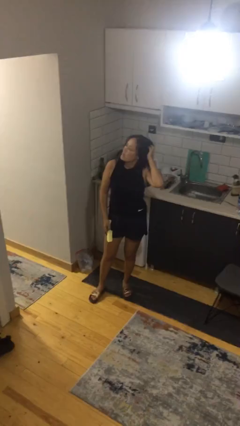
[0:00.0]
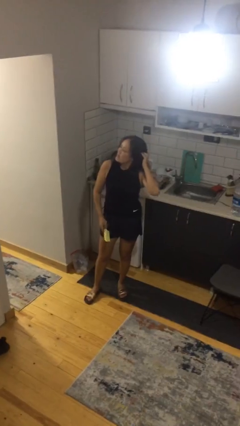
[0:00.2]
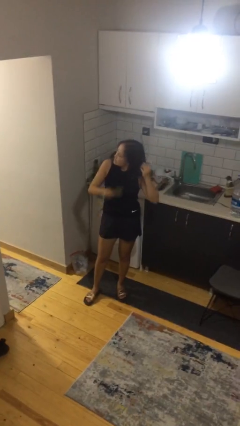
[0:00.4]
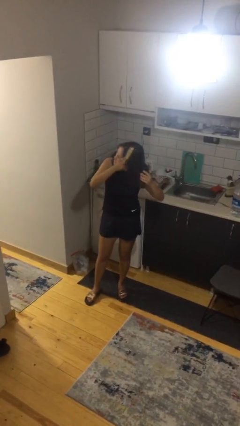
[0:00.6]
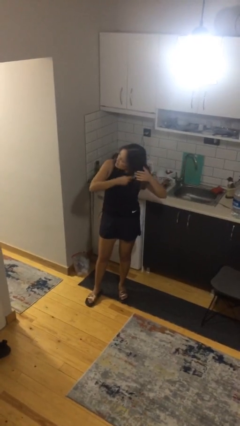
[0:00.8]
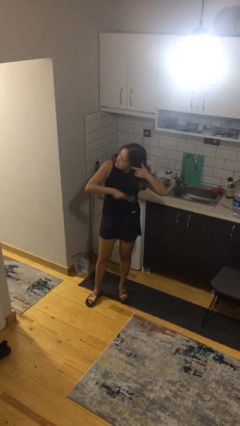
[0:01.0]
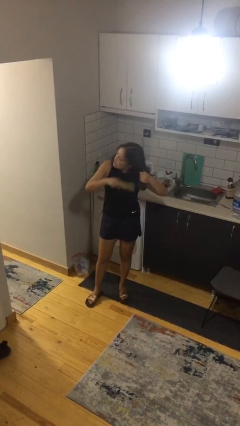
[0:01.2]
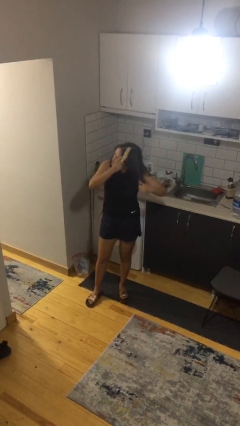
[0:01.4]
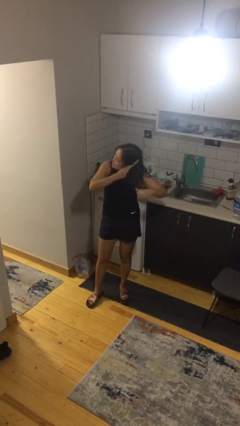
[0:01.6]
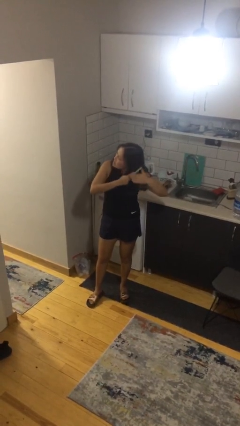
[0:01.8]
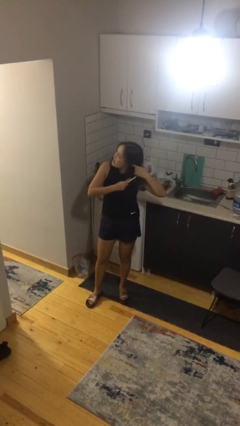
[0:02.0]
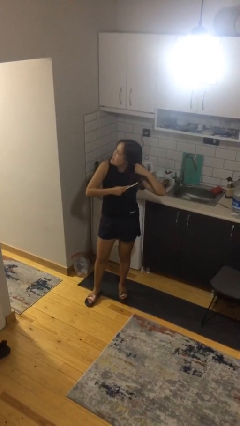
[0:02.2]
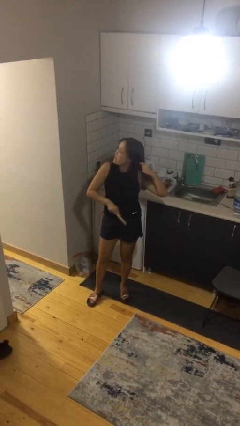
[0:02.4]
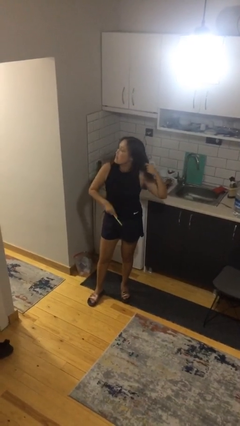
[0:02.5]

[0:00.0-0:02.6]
person brushes hair

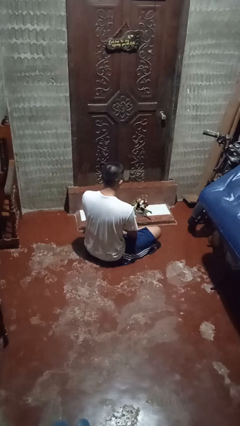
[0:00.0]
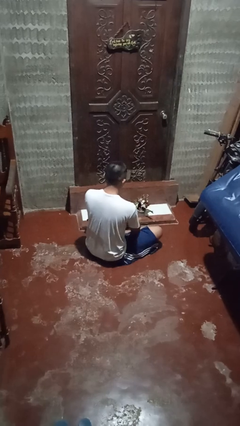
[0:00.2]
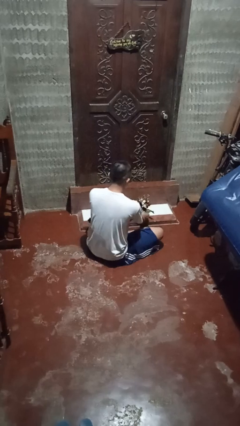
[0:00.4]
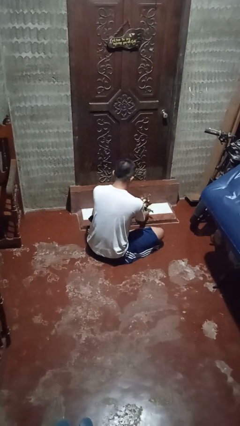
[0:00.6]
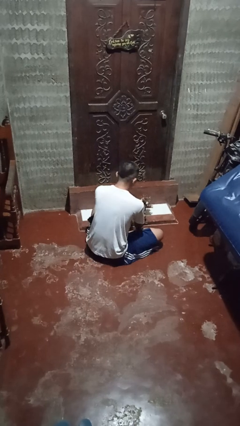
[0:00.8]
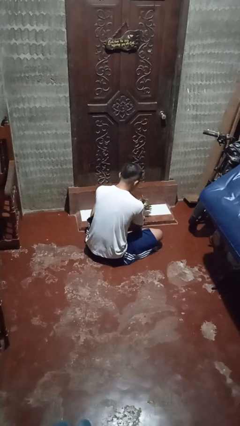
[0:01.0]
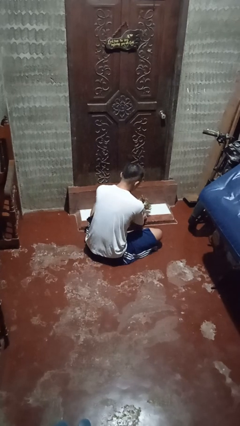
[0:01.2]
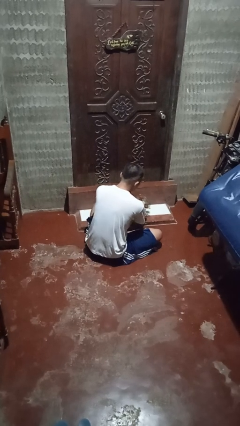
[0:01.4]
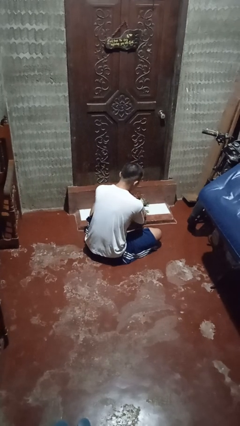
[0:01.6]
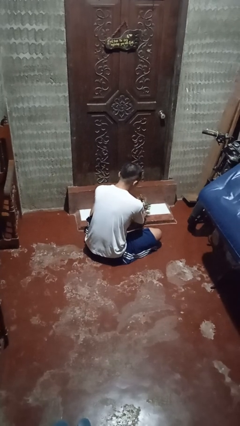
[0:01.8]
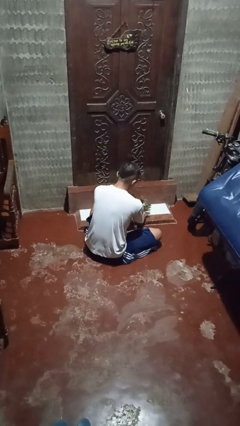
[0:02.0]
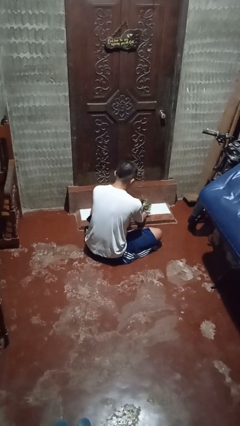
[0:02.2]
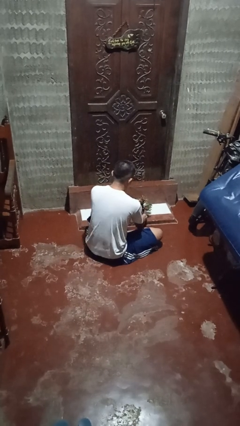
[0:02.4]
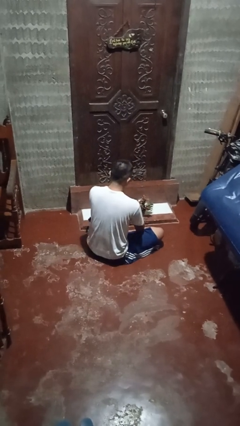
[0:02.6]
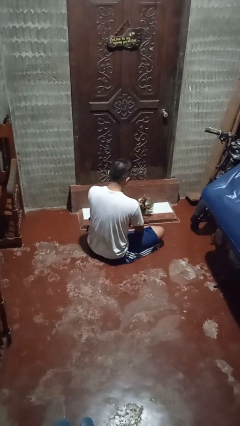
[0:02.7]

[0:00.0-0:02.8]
person arranges flowers in vase

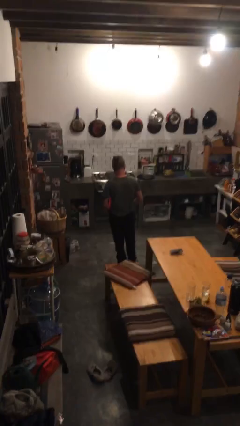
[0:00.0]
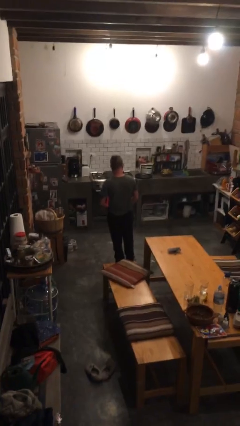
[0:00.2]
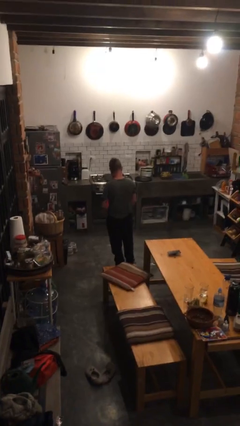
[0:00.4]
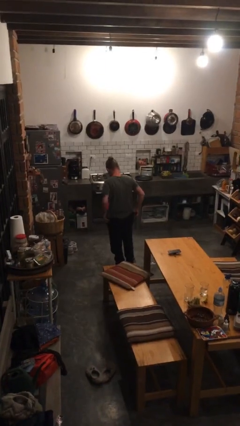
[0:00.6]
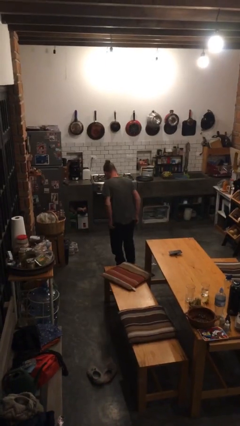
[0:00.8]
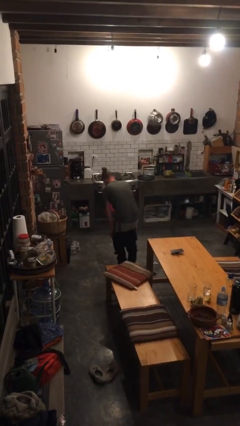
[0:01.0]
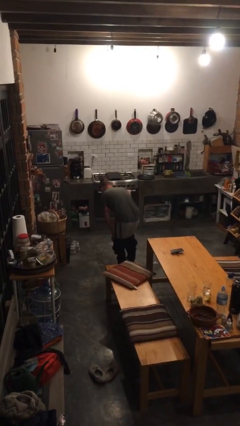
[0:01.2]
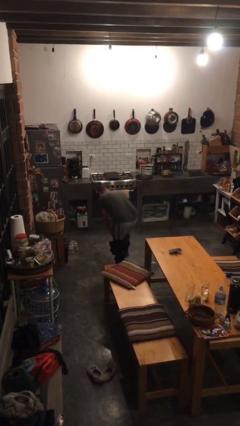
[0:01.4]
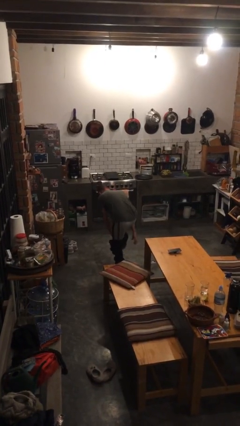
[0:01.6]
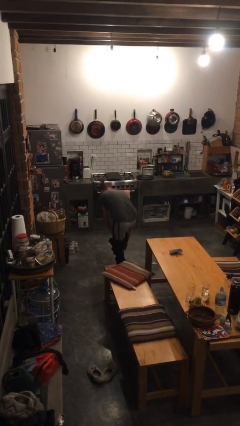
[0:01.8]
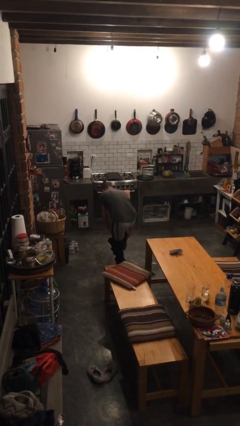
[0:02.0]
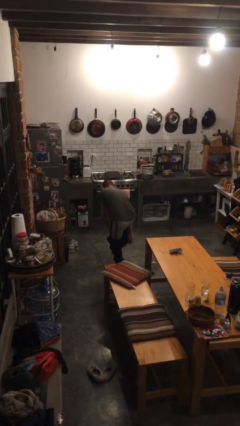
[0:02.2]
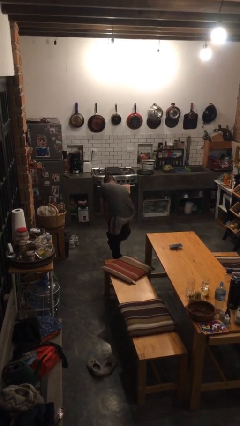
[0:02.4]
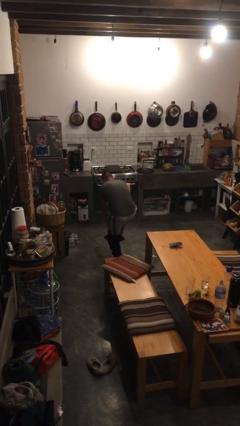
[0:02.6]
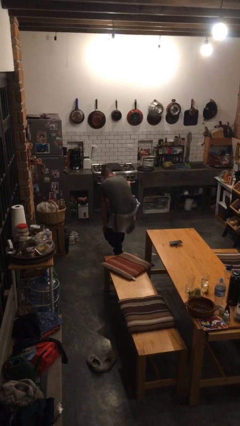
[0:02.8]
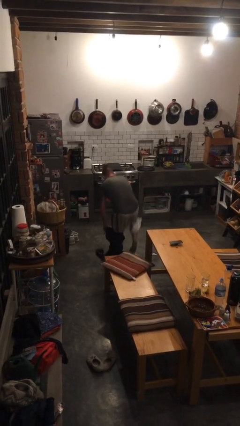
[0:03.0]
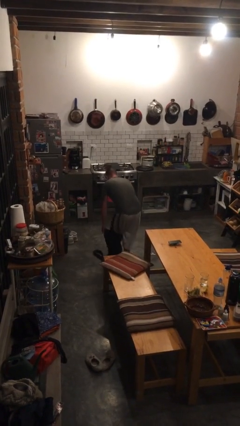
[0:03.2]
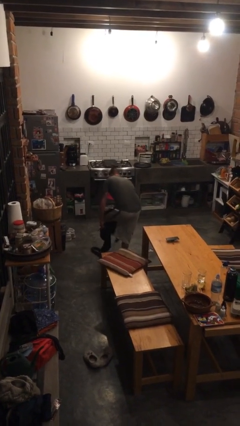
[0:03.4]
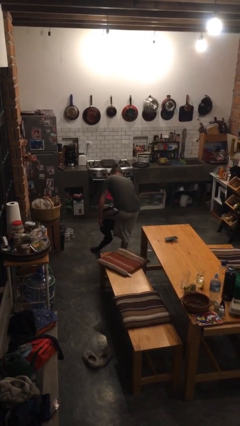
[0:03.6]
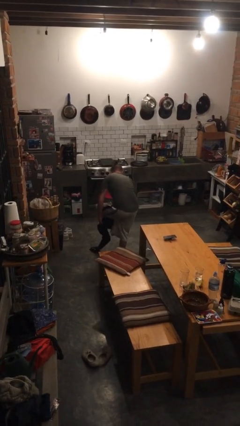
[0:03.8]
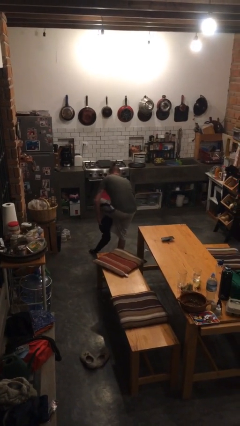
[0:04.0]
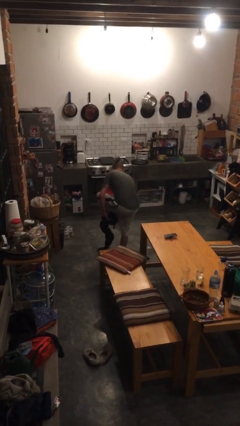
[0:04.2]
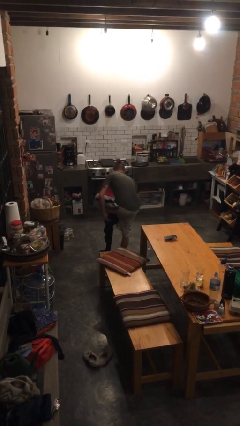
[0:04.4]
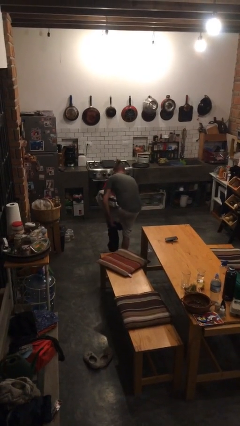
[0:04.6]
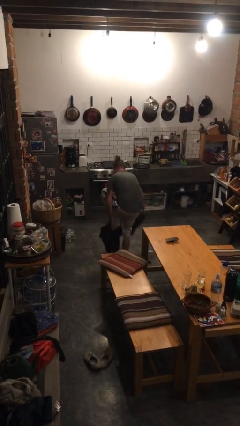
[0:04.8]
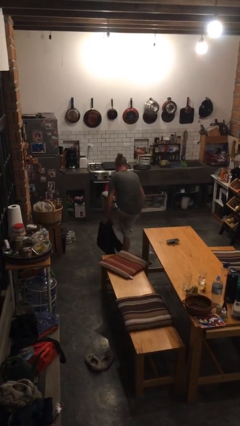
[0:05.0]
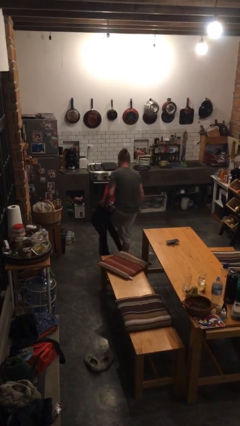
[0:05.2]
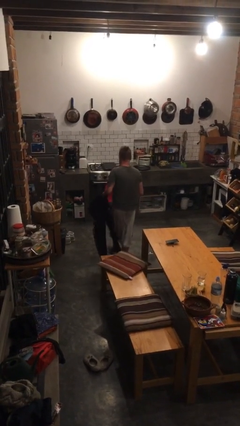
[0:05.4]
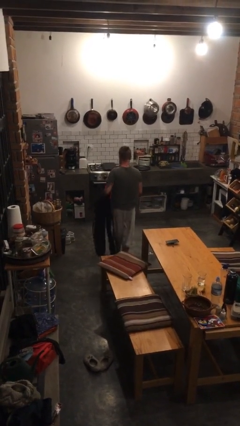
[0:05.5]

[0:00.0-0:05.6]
person takes off pants

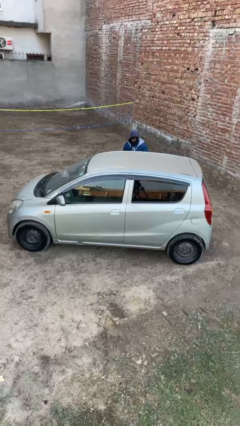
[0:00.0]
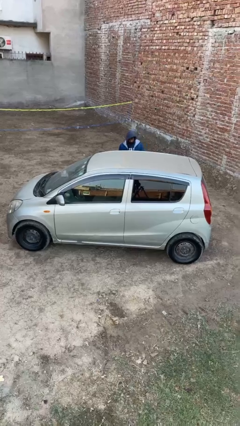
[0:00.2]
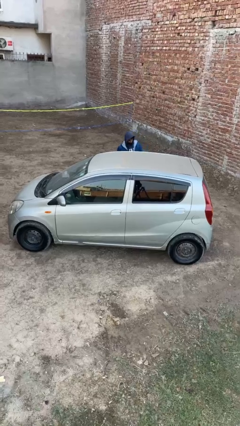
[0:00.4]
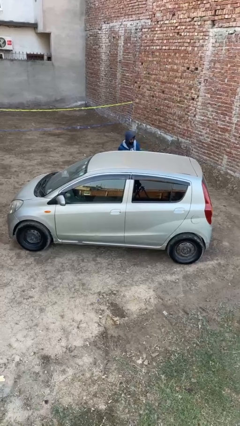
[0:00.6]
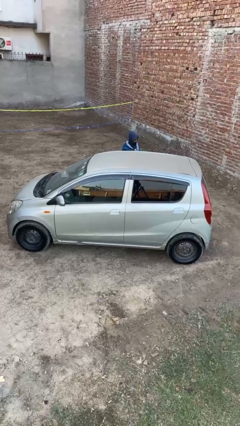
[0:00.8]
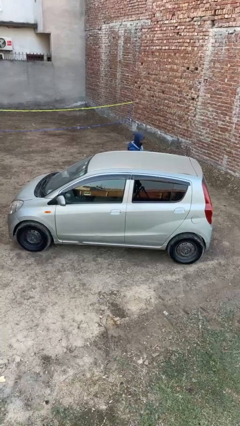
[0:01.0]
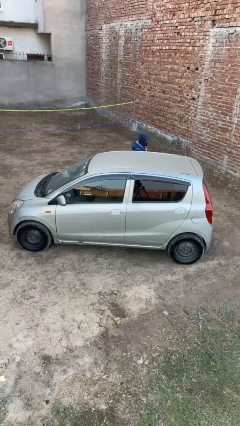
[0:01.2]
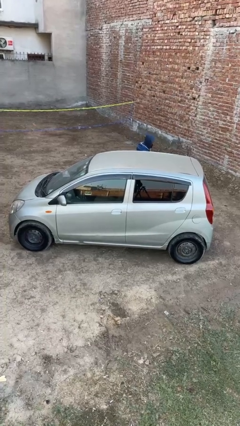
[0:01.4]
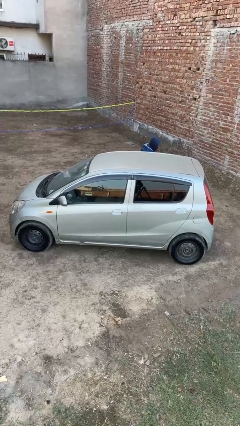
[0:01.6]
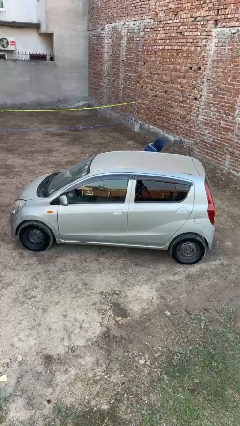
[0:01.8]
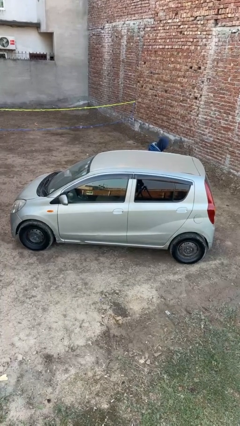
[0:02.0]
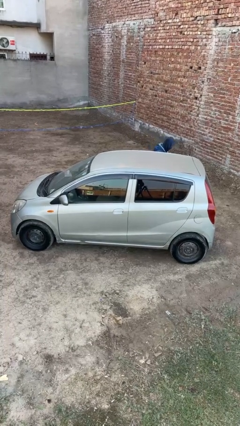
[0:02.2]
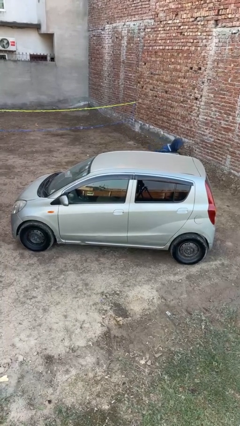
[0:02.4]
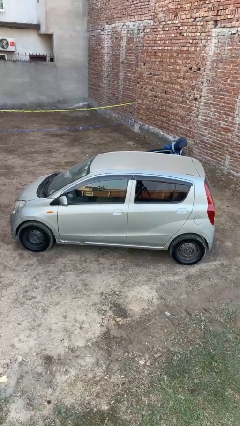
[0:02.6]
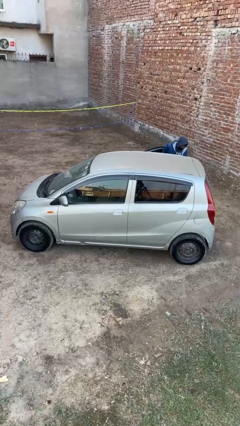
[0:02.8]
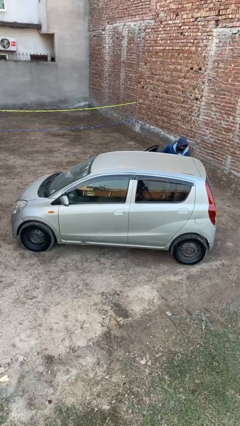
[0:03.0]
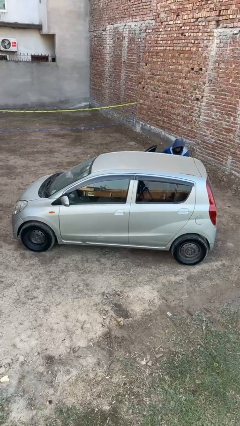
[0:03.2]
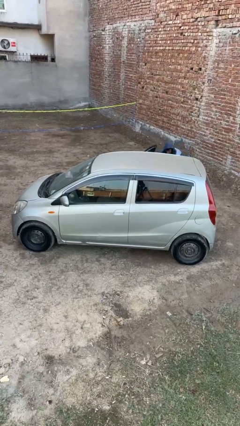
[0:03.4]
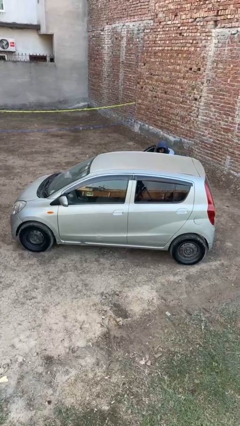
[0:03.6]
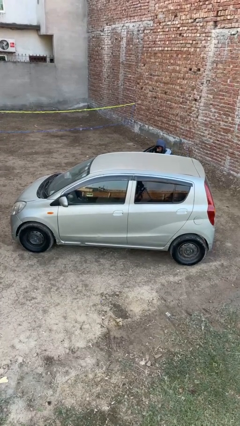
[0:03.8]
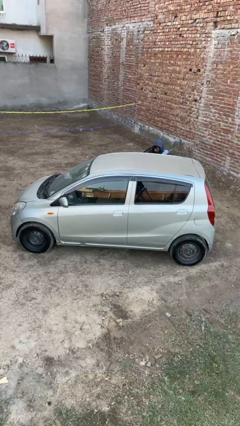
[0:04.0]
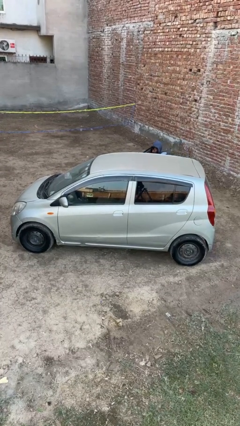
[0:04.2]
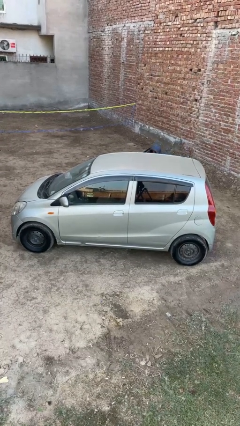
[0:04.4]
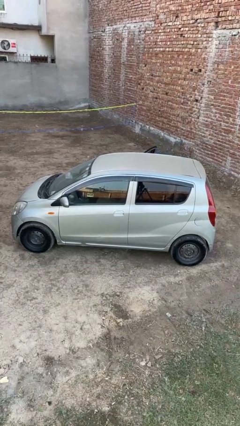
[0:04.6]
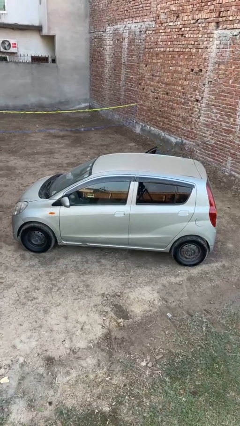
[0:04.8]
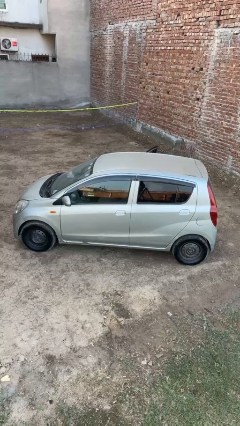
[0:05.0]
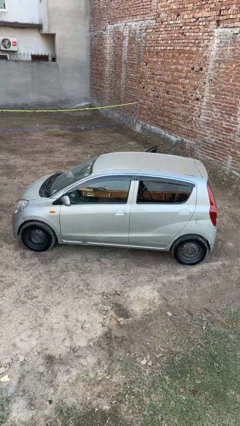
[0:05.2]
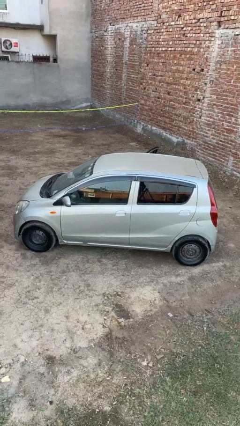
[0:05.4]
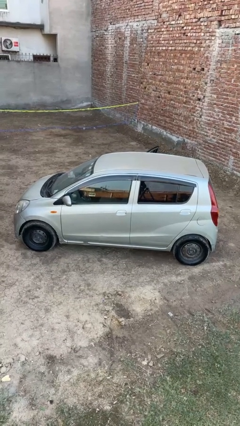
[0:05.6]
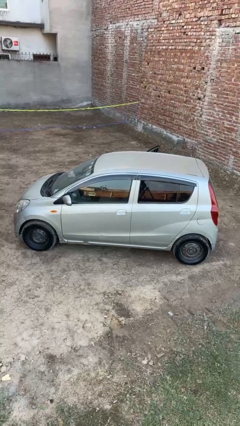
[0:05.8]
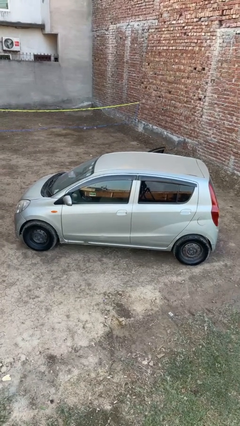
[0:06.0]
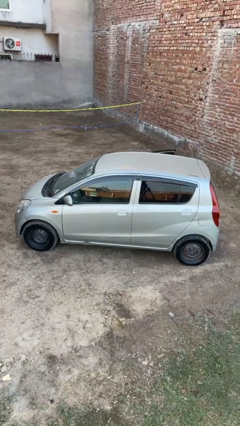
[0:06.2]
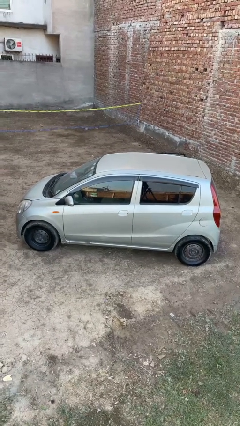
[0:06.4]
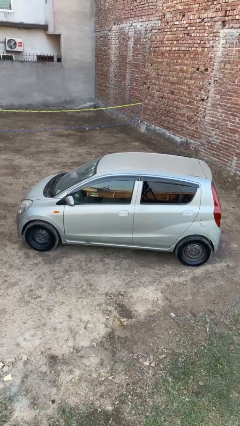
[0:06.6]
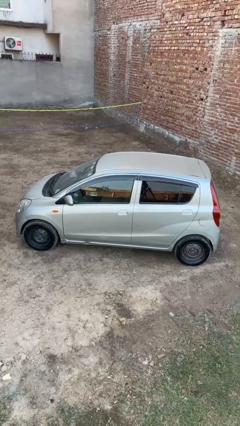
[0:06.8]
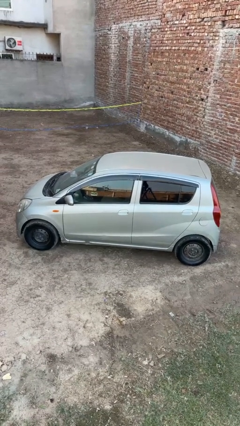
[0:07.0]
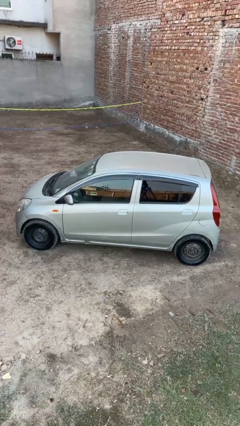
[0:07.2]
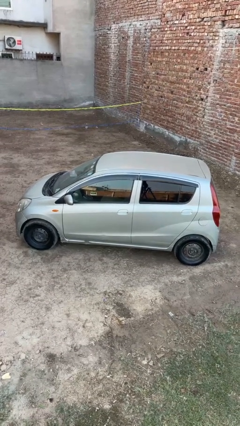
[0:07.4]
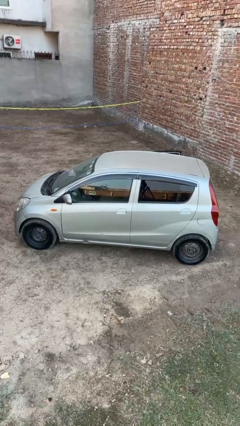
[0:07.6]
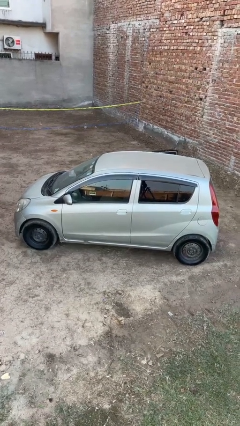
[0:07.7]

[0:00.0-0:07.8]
car picks up person
